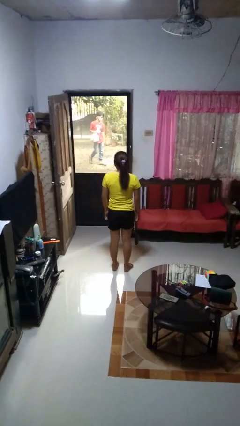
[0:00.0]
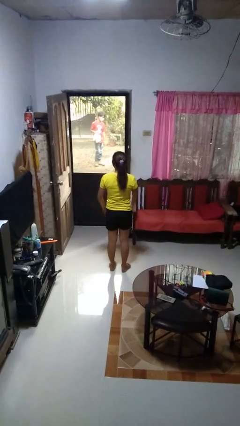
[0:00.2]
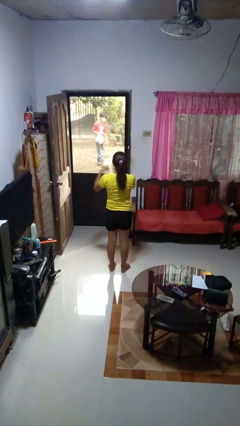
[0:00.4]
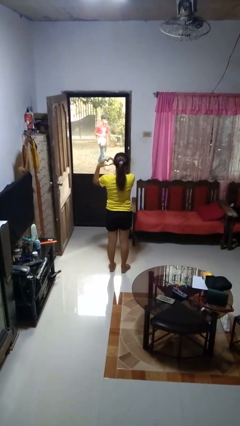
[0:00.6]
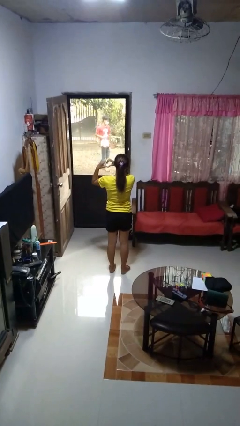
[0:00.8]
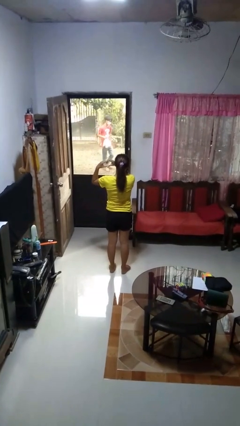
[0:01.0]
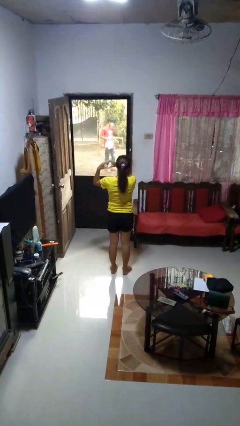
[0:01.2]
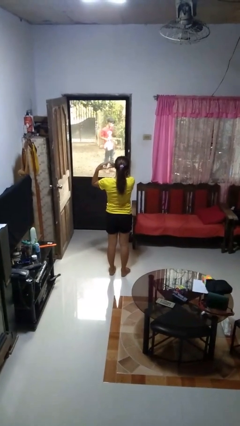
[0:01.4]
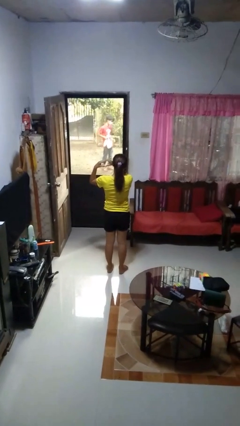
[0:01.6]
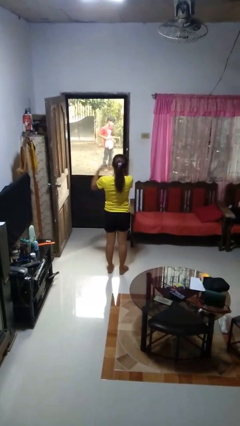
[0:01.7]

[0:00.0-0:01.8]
person gestures heart

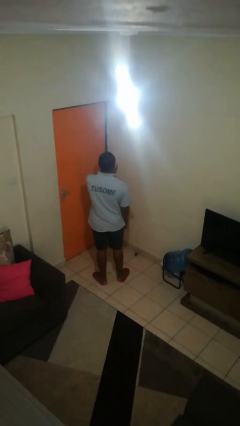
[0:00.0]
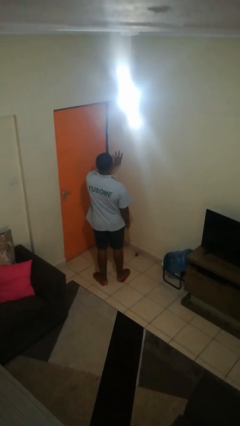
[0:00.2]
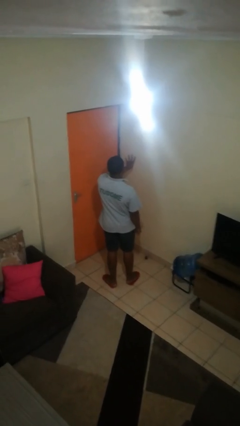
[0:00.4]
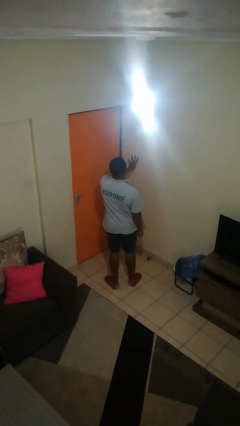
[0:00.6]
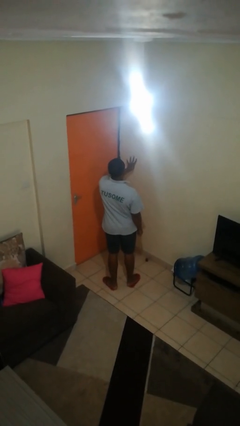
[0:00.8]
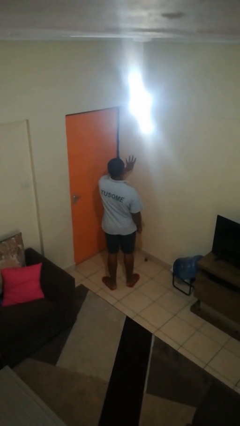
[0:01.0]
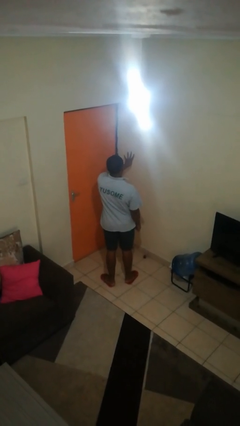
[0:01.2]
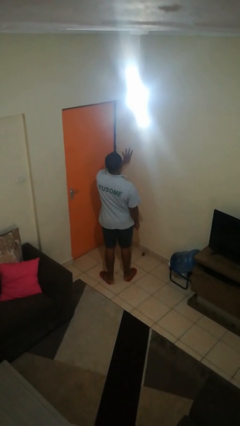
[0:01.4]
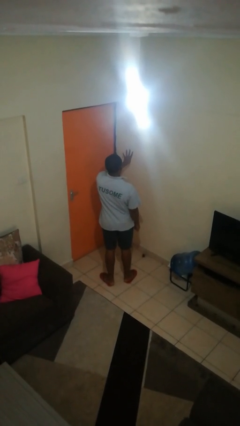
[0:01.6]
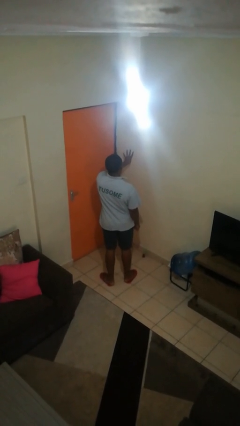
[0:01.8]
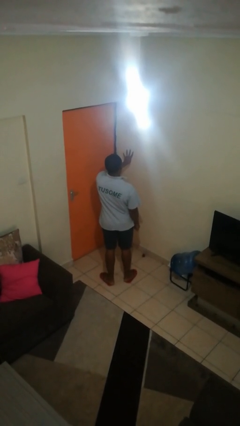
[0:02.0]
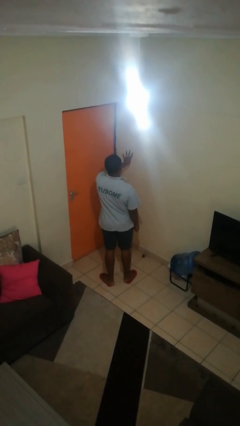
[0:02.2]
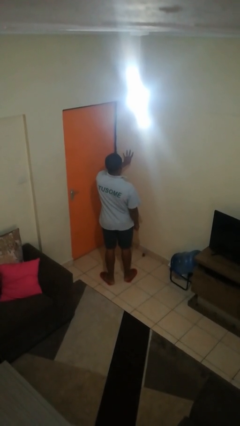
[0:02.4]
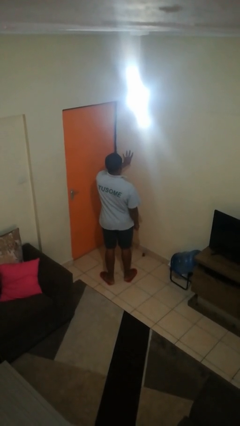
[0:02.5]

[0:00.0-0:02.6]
person gestures number four

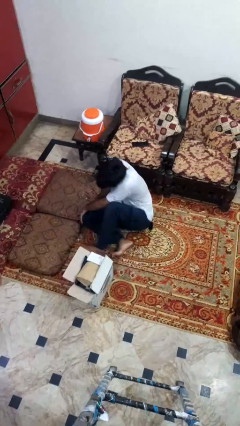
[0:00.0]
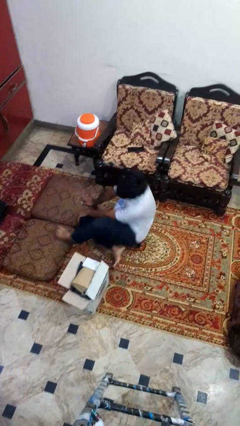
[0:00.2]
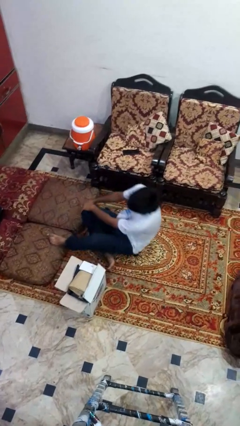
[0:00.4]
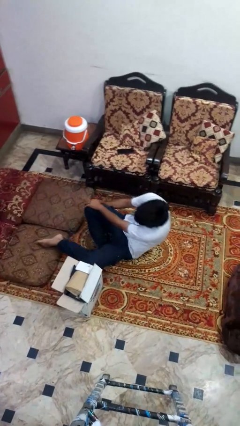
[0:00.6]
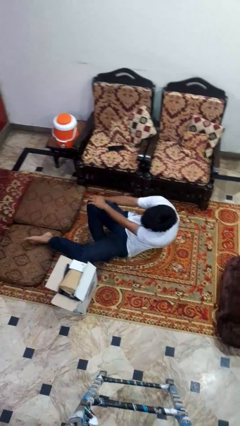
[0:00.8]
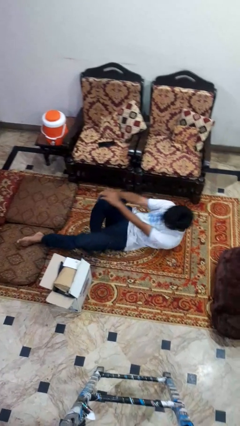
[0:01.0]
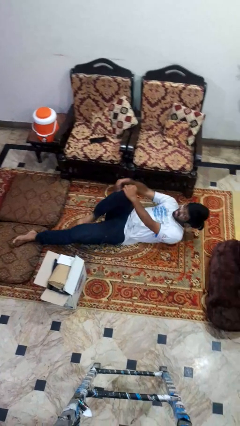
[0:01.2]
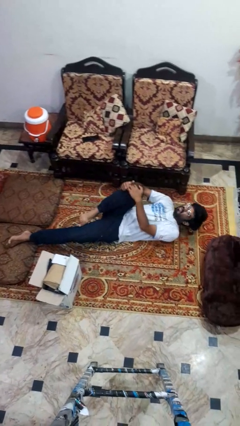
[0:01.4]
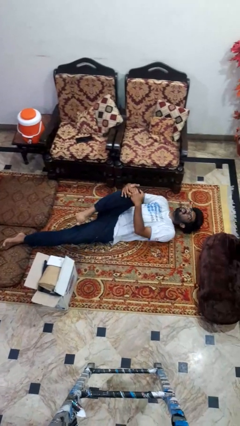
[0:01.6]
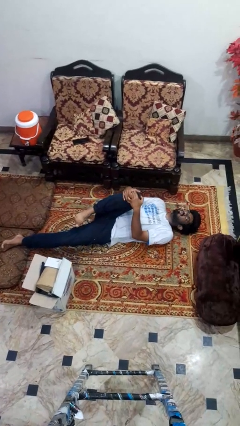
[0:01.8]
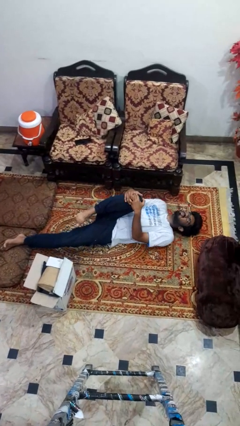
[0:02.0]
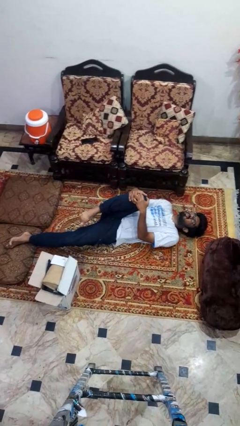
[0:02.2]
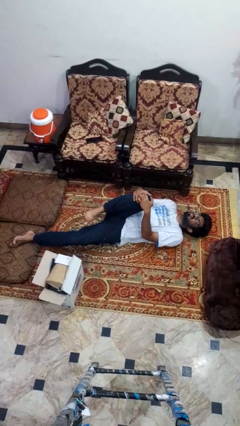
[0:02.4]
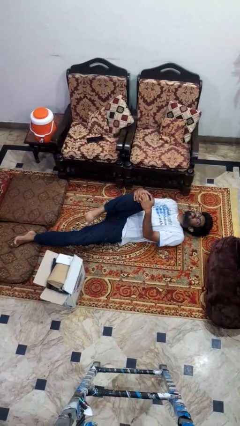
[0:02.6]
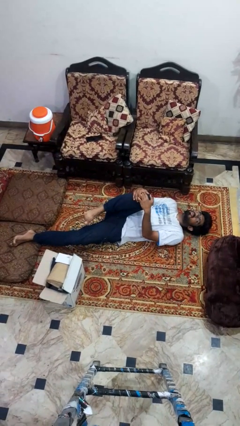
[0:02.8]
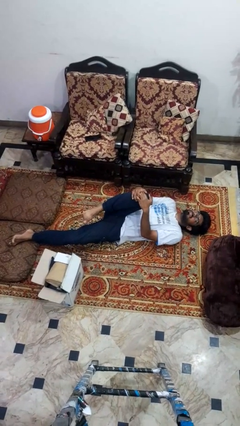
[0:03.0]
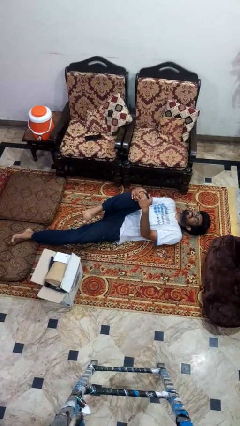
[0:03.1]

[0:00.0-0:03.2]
person lies down on floor

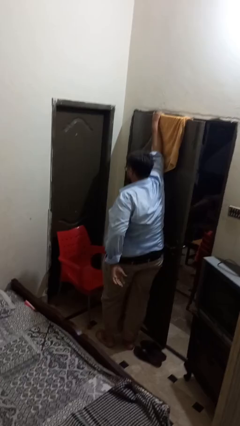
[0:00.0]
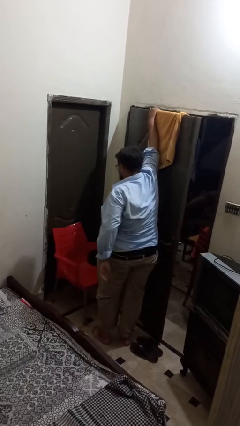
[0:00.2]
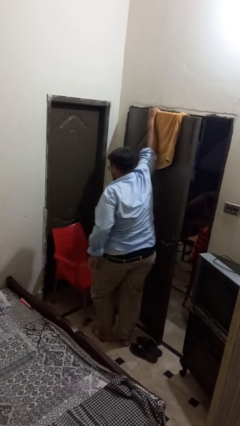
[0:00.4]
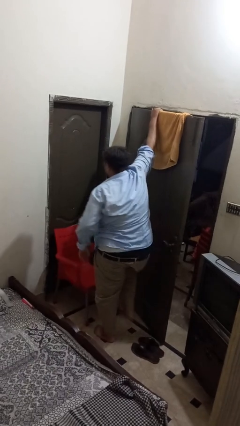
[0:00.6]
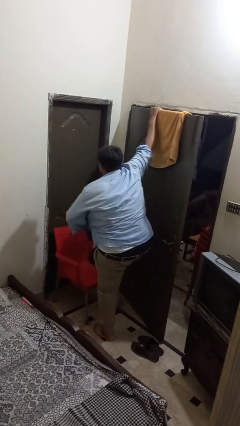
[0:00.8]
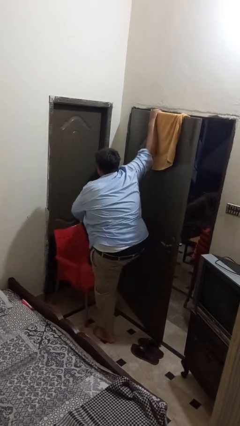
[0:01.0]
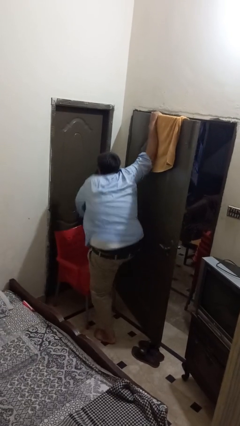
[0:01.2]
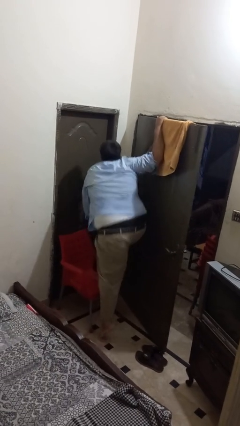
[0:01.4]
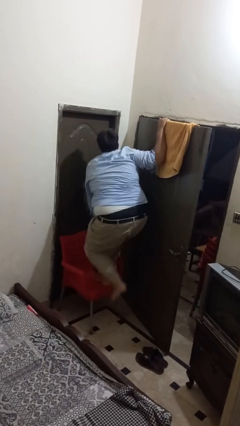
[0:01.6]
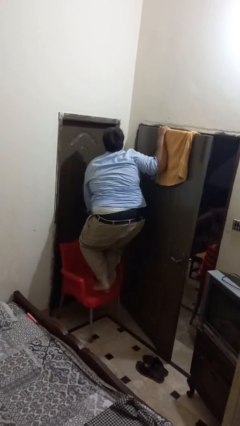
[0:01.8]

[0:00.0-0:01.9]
person climbs on chair

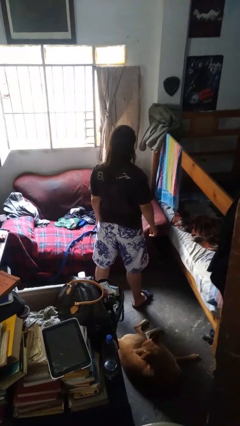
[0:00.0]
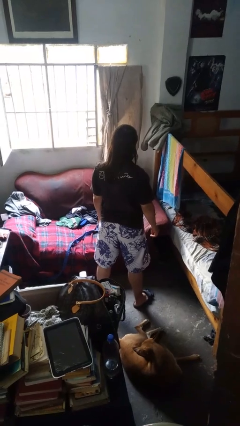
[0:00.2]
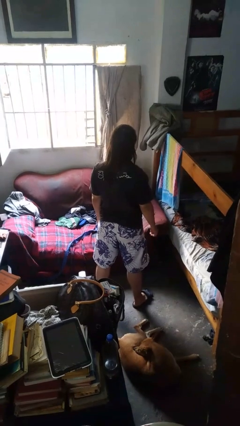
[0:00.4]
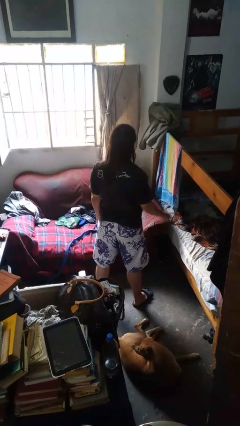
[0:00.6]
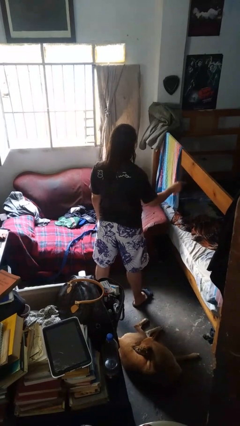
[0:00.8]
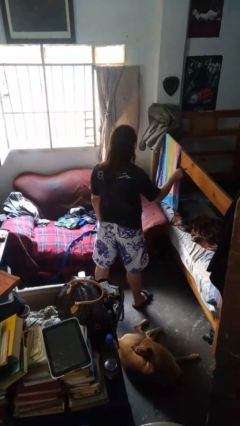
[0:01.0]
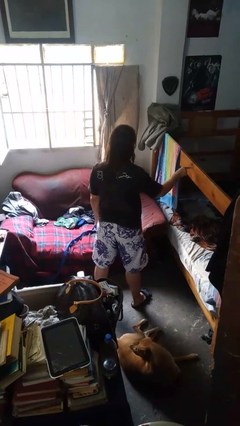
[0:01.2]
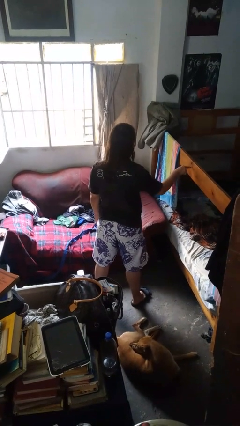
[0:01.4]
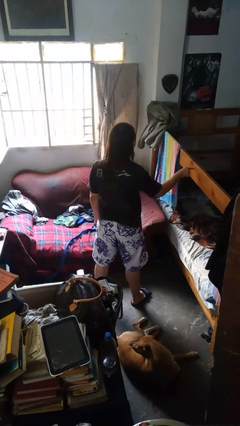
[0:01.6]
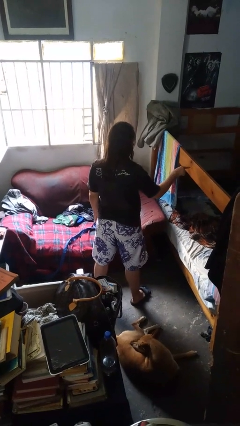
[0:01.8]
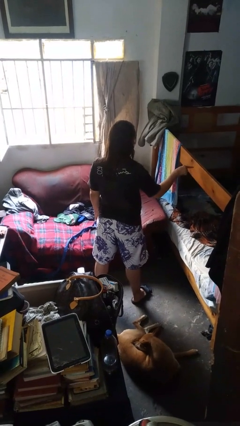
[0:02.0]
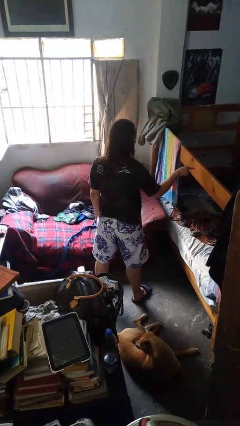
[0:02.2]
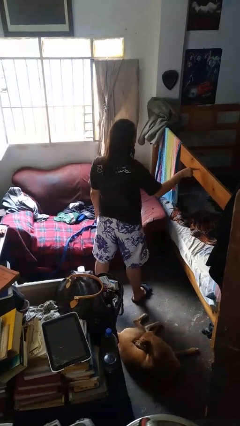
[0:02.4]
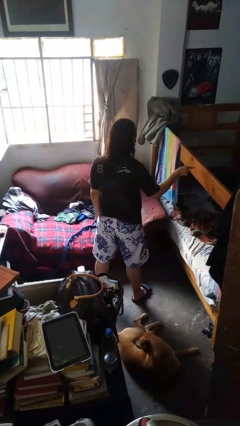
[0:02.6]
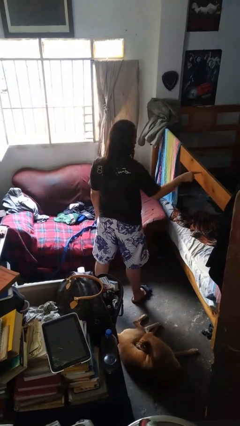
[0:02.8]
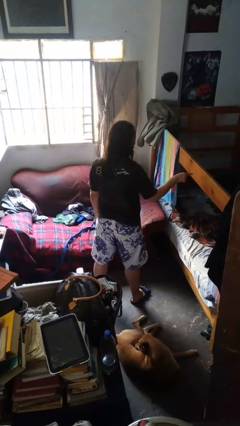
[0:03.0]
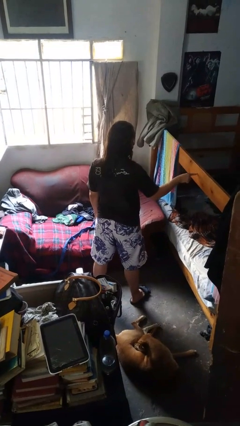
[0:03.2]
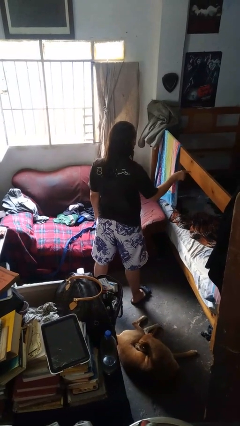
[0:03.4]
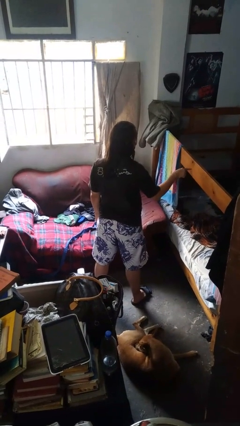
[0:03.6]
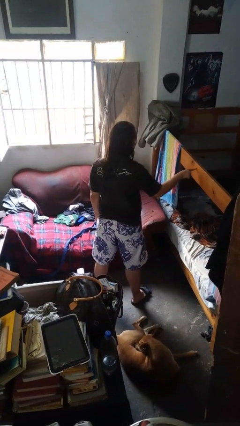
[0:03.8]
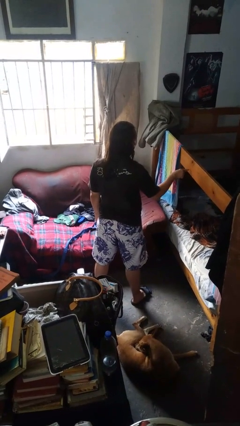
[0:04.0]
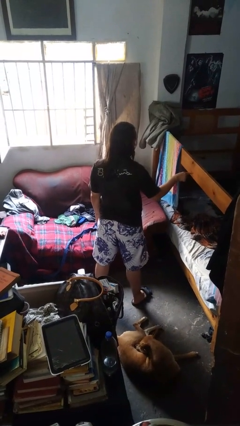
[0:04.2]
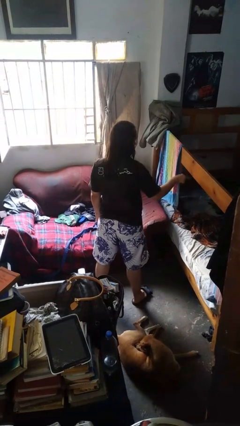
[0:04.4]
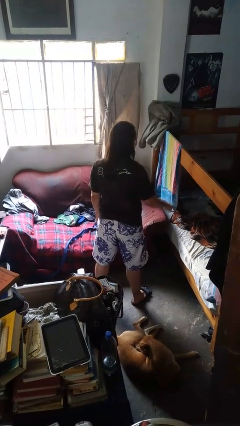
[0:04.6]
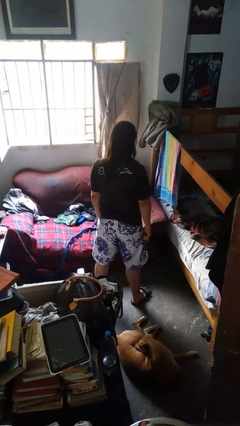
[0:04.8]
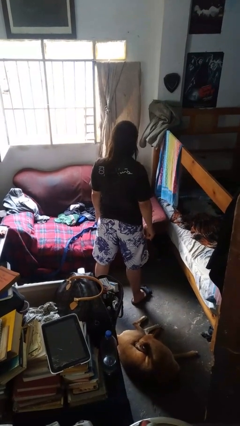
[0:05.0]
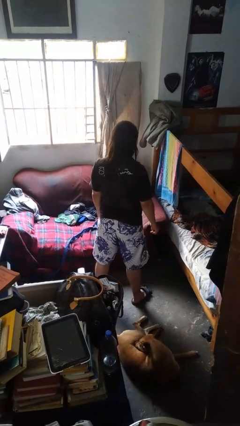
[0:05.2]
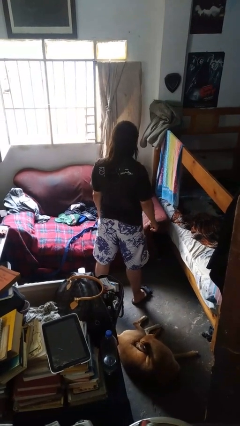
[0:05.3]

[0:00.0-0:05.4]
person taps object with finger

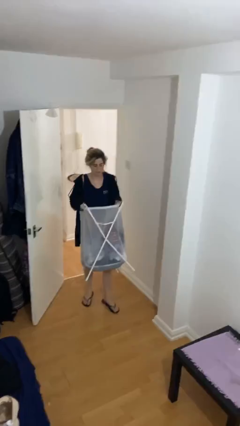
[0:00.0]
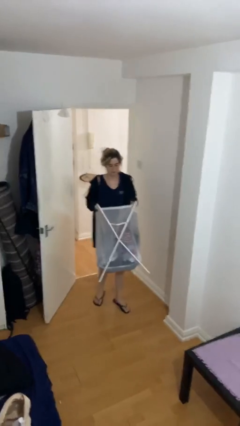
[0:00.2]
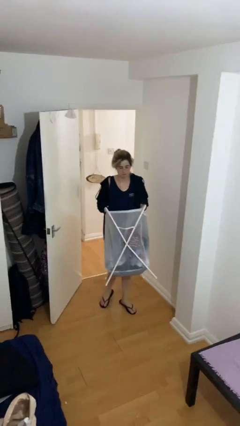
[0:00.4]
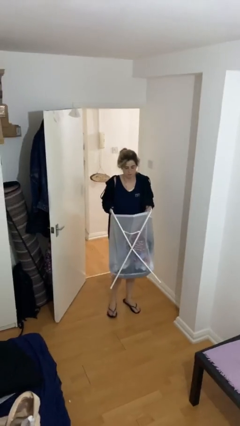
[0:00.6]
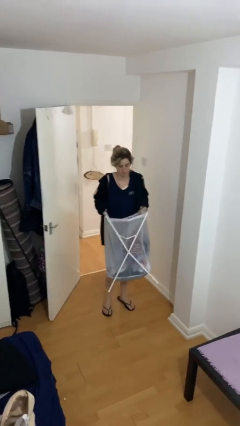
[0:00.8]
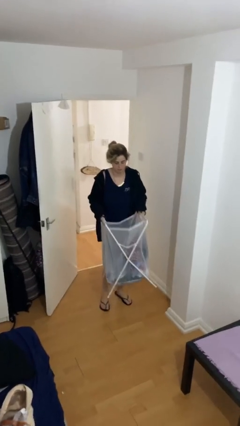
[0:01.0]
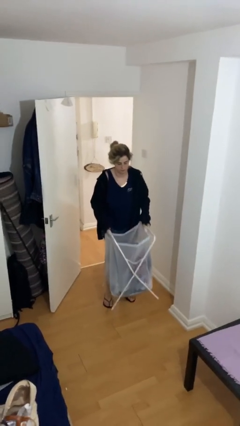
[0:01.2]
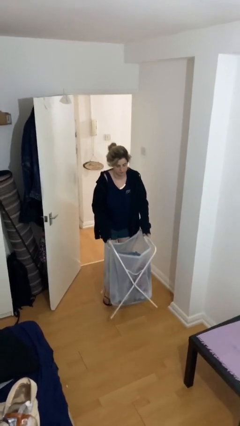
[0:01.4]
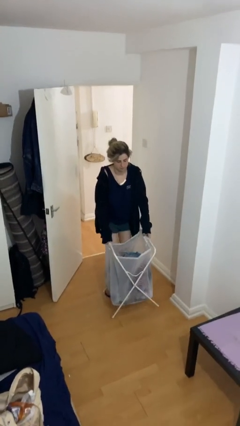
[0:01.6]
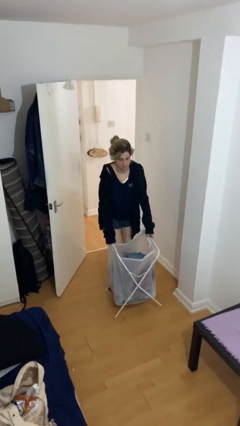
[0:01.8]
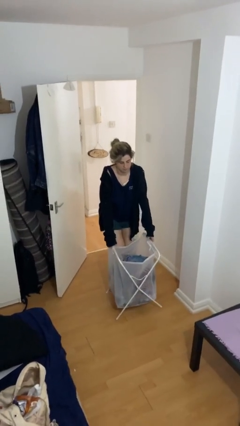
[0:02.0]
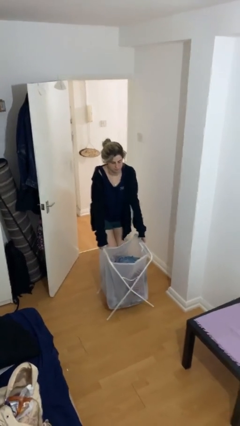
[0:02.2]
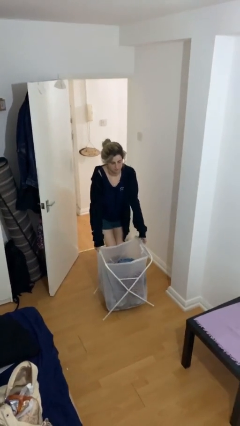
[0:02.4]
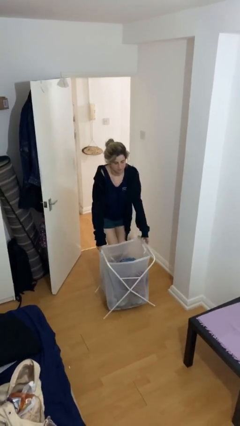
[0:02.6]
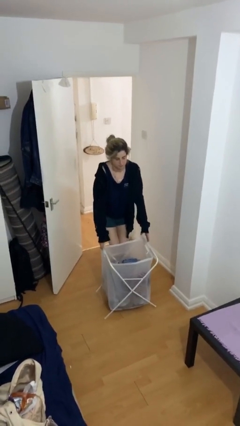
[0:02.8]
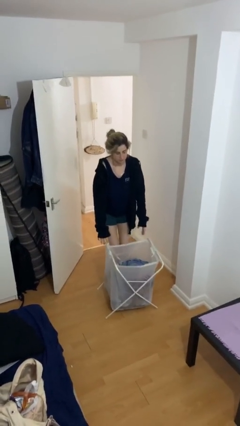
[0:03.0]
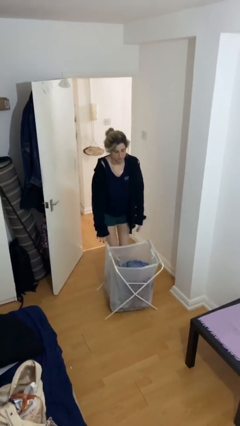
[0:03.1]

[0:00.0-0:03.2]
person puts down object on floor
